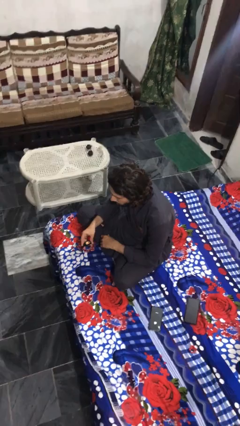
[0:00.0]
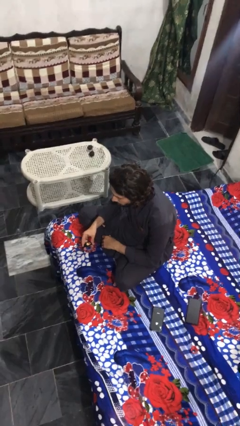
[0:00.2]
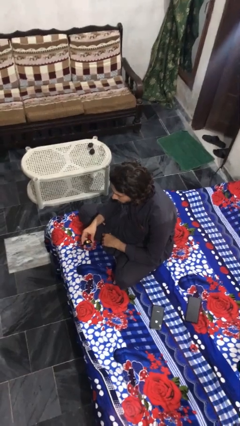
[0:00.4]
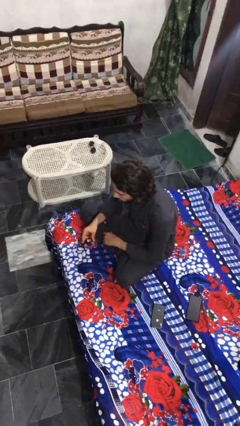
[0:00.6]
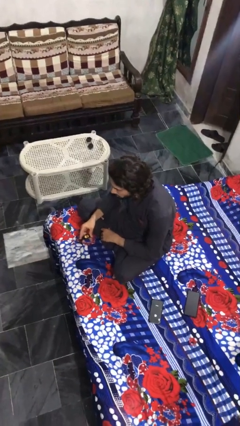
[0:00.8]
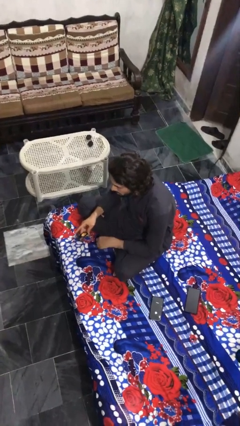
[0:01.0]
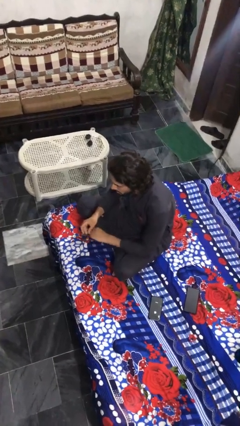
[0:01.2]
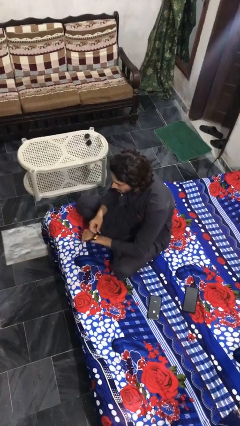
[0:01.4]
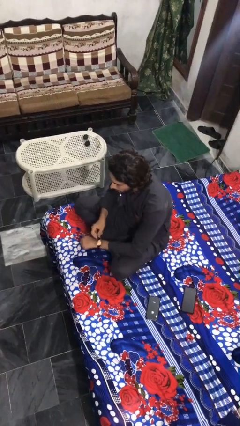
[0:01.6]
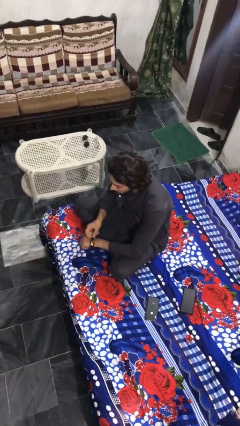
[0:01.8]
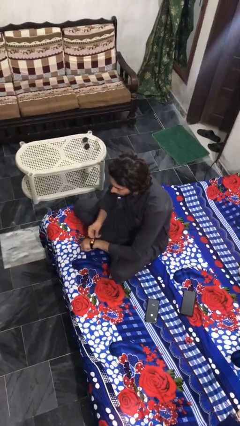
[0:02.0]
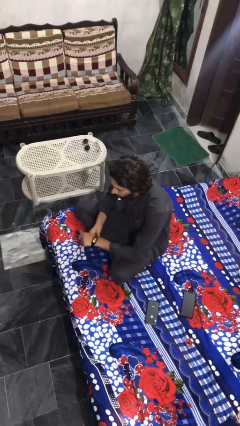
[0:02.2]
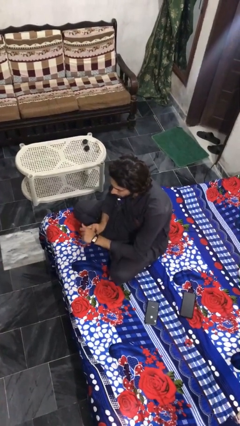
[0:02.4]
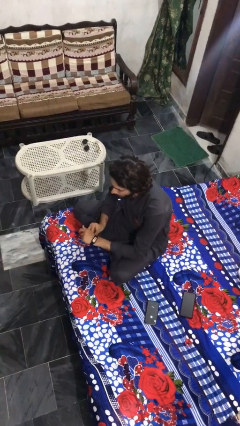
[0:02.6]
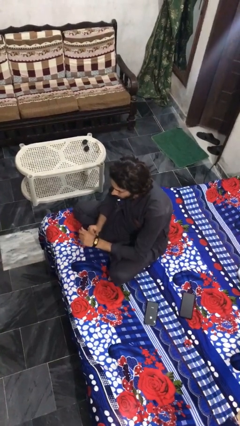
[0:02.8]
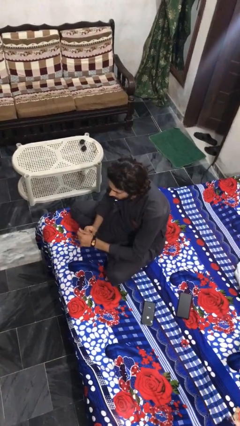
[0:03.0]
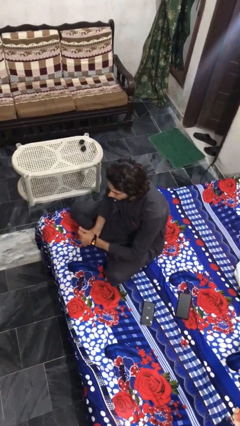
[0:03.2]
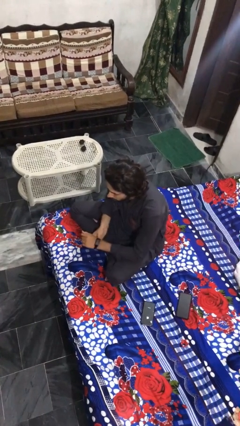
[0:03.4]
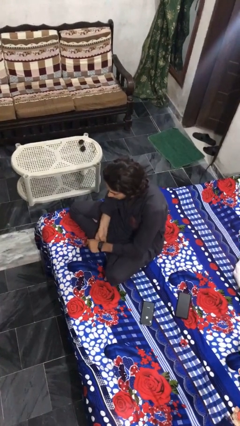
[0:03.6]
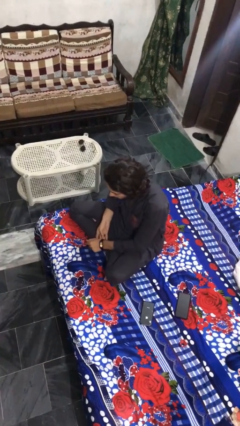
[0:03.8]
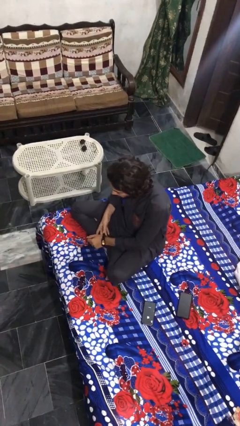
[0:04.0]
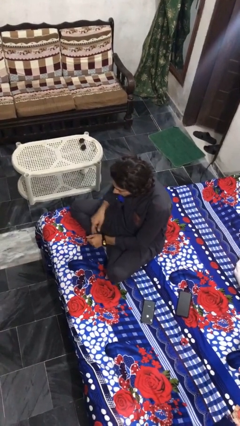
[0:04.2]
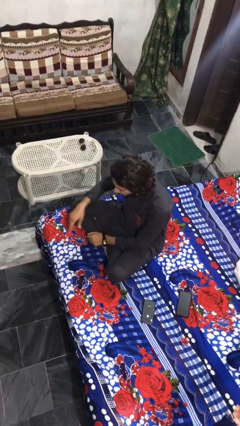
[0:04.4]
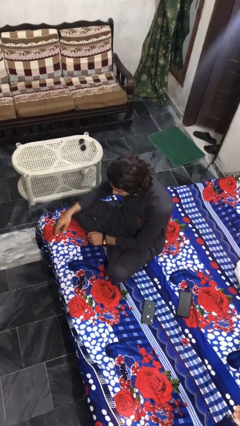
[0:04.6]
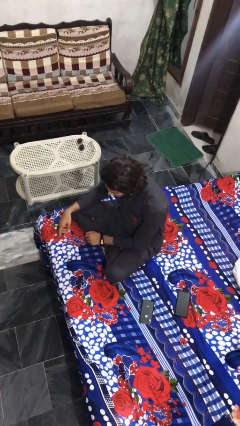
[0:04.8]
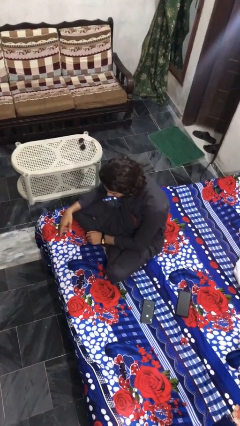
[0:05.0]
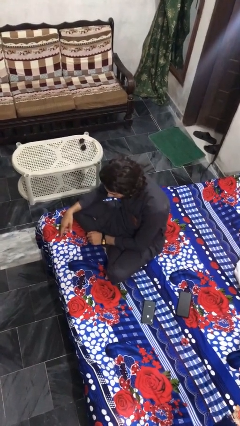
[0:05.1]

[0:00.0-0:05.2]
person puts on wristwatch

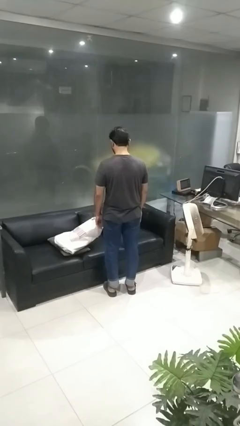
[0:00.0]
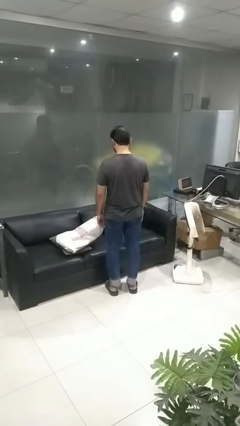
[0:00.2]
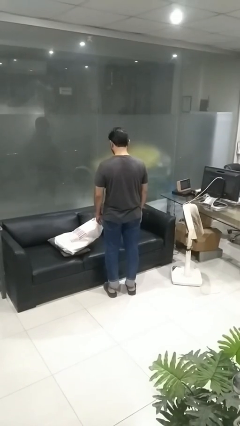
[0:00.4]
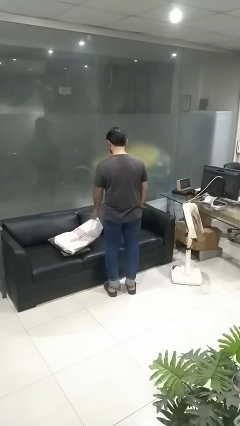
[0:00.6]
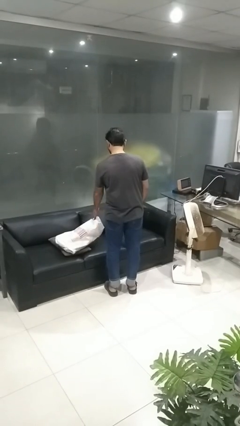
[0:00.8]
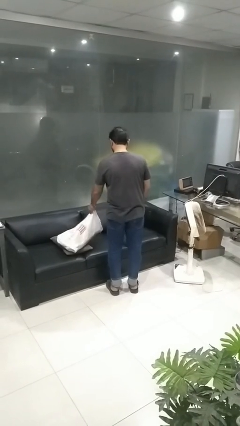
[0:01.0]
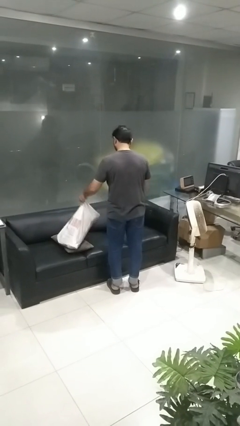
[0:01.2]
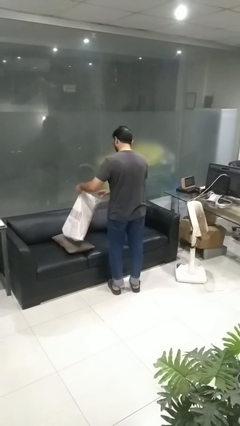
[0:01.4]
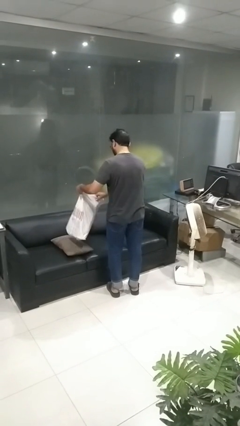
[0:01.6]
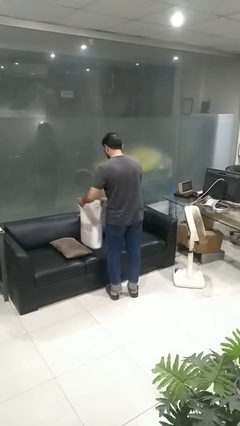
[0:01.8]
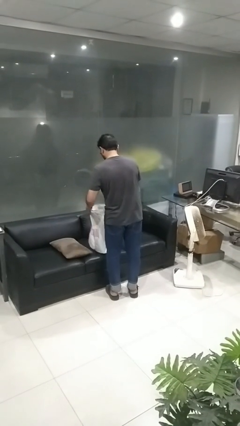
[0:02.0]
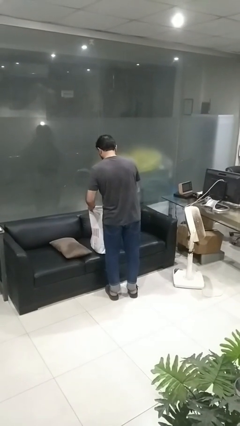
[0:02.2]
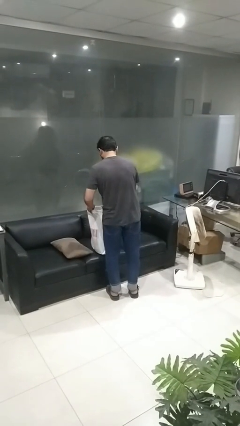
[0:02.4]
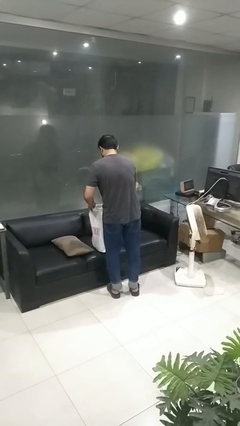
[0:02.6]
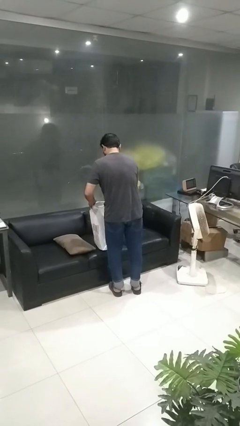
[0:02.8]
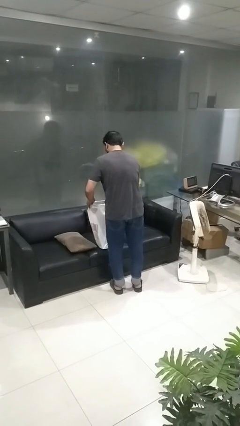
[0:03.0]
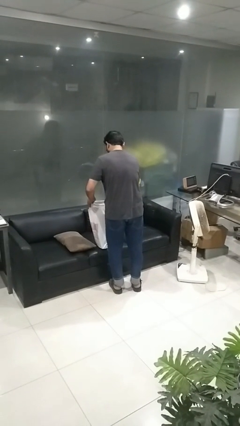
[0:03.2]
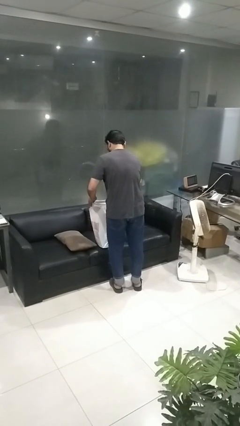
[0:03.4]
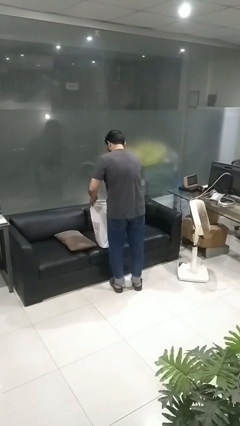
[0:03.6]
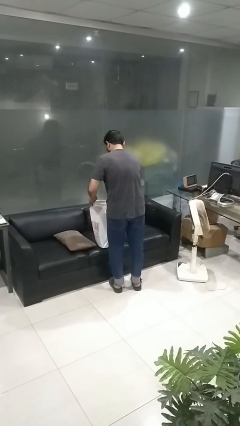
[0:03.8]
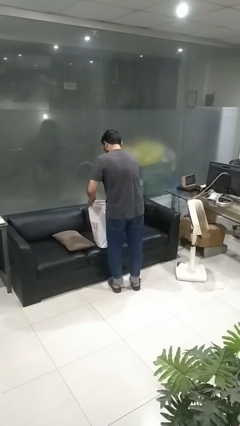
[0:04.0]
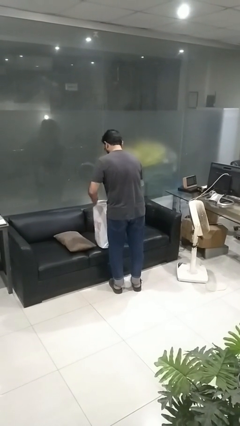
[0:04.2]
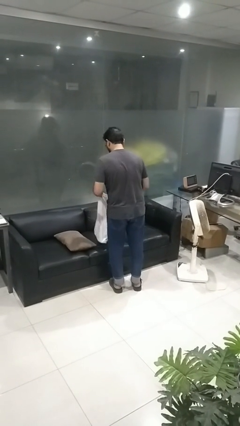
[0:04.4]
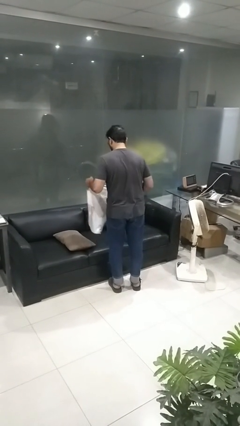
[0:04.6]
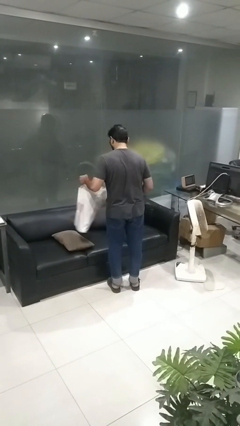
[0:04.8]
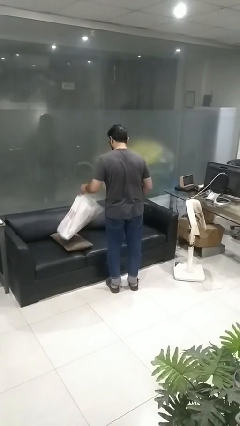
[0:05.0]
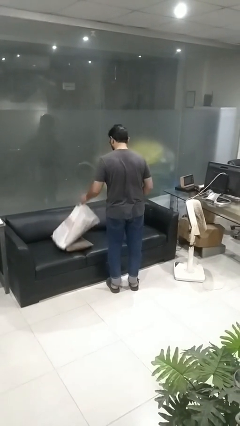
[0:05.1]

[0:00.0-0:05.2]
person searches in bag

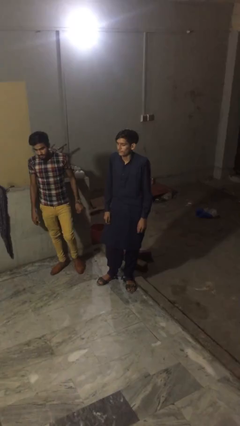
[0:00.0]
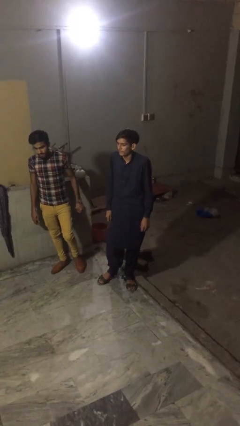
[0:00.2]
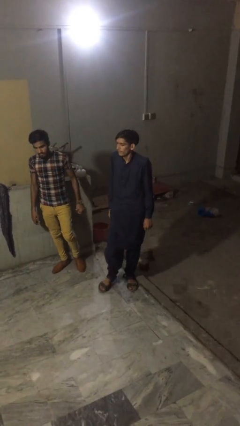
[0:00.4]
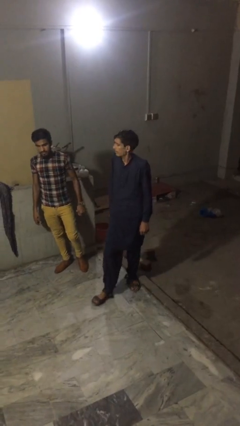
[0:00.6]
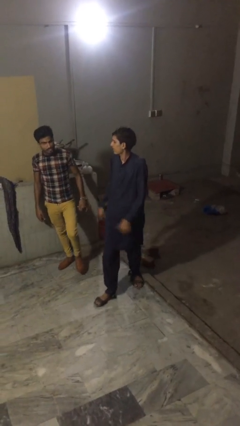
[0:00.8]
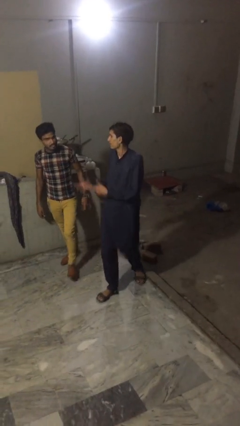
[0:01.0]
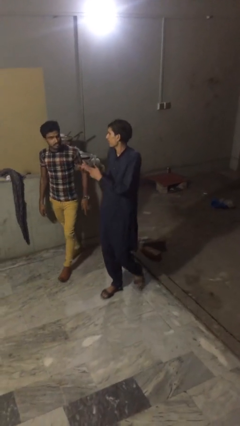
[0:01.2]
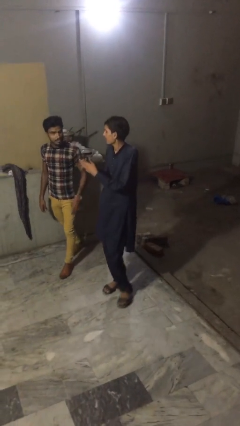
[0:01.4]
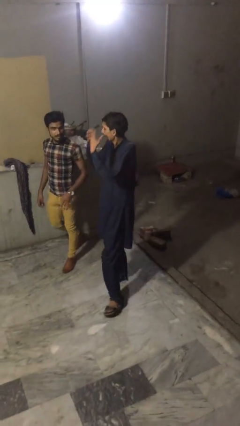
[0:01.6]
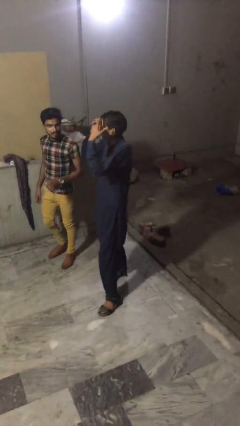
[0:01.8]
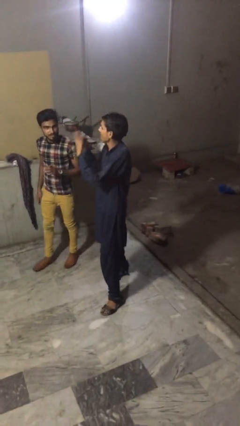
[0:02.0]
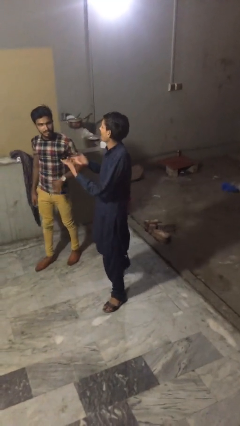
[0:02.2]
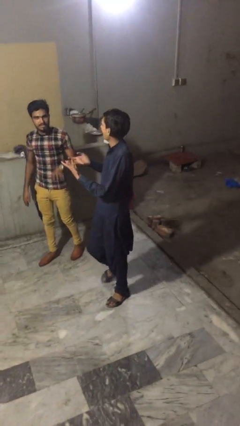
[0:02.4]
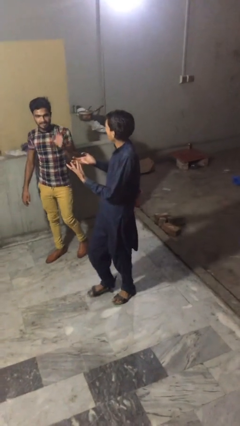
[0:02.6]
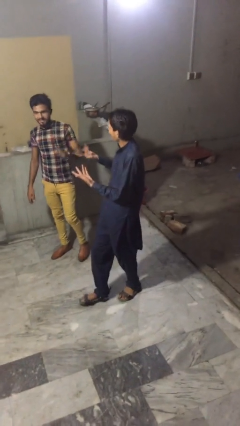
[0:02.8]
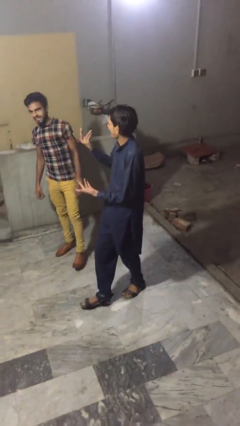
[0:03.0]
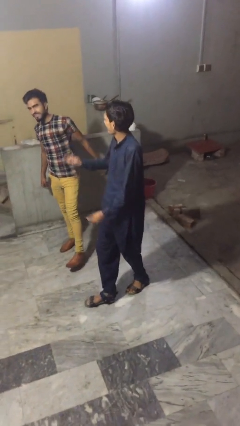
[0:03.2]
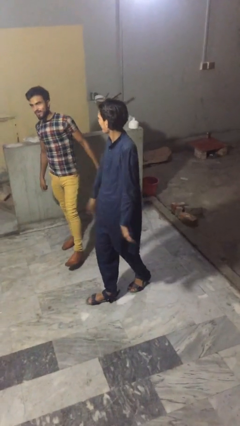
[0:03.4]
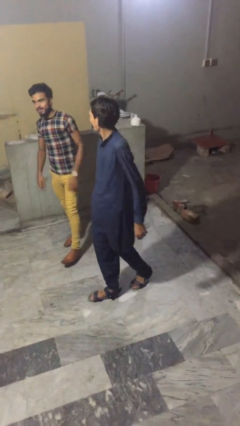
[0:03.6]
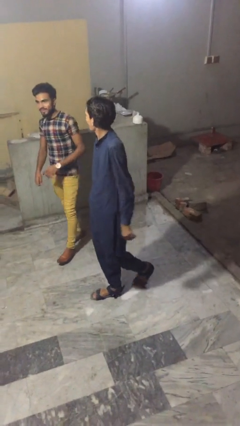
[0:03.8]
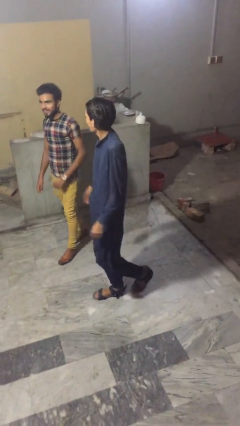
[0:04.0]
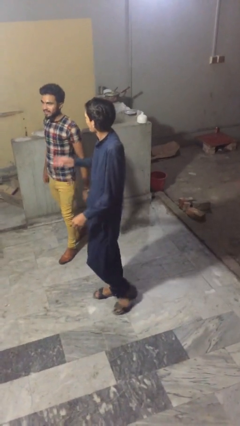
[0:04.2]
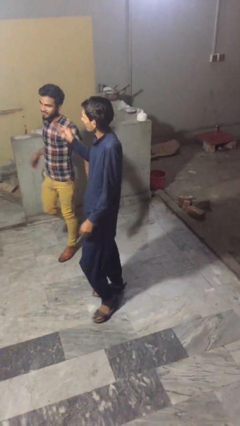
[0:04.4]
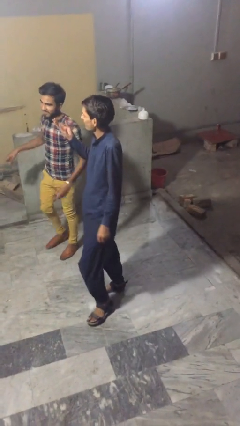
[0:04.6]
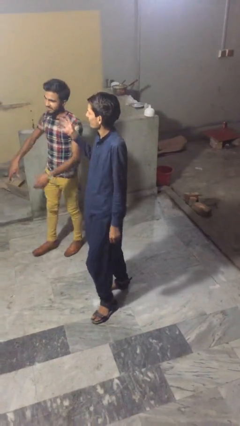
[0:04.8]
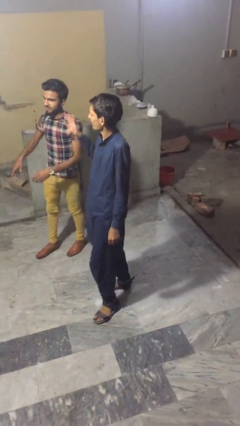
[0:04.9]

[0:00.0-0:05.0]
person talks to person

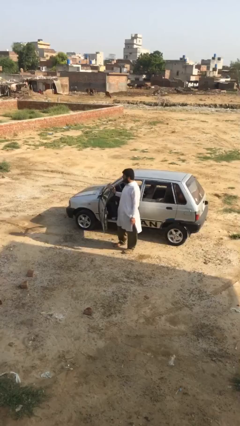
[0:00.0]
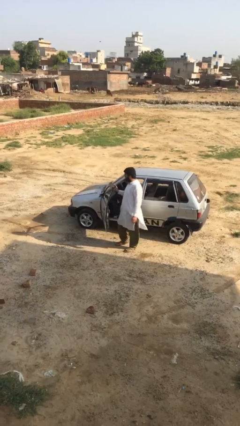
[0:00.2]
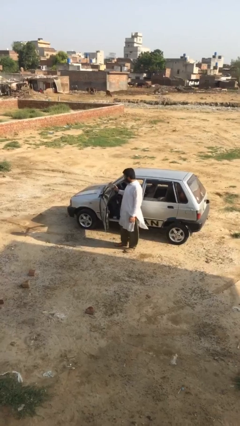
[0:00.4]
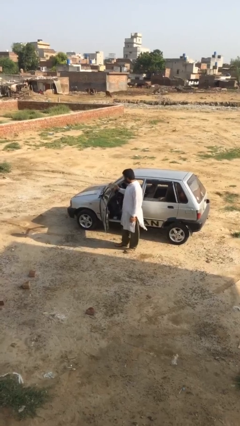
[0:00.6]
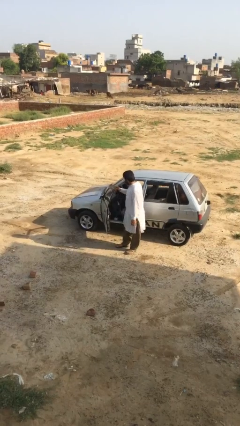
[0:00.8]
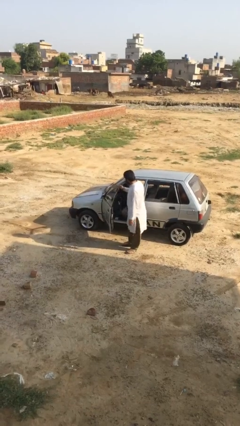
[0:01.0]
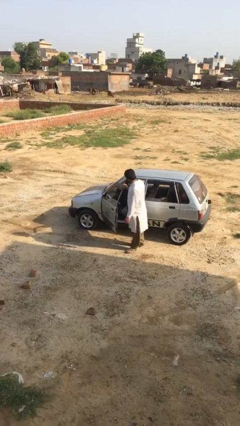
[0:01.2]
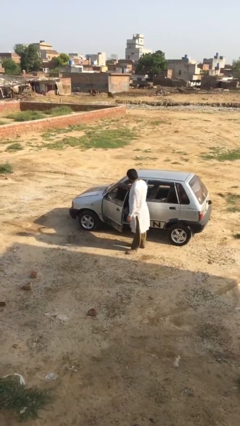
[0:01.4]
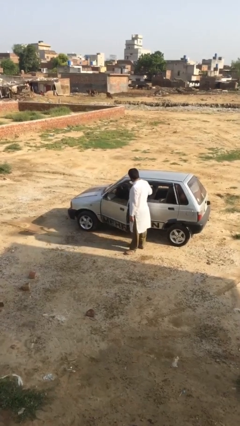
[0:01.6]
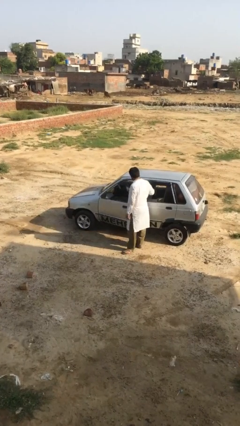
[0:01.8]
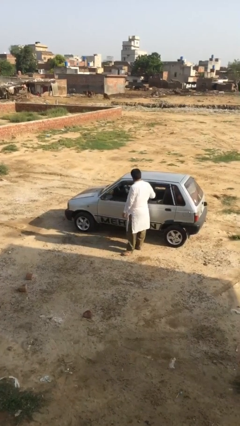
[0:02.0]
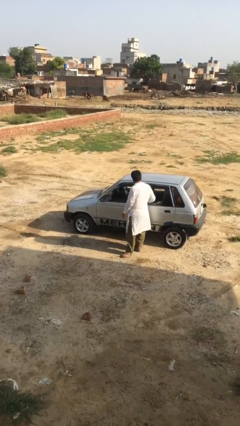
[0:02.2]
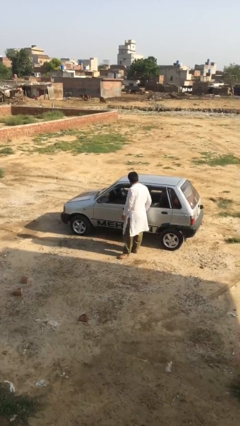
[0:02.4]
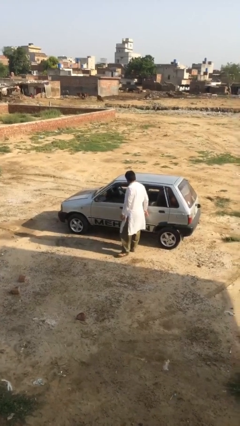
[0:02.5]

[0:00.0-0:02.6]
person closes car door
